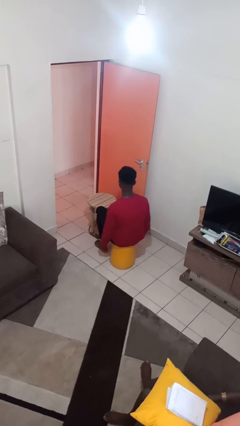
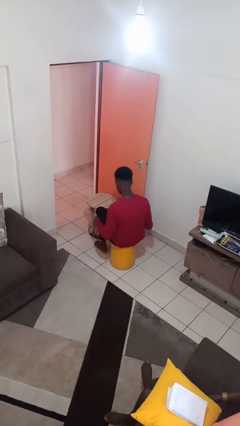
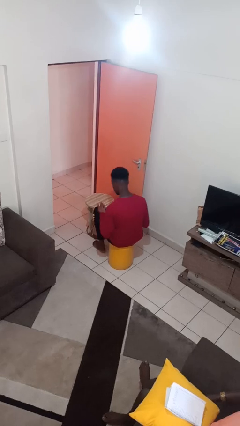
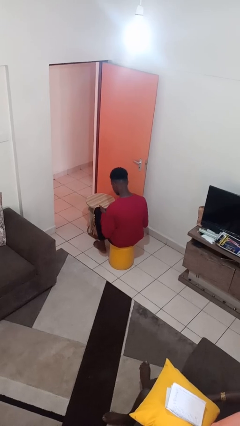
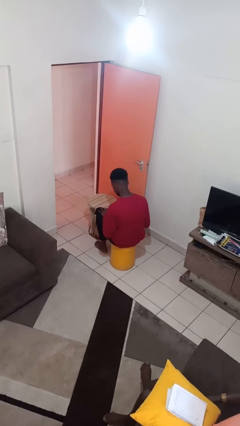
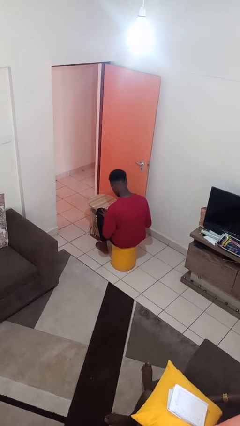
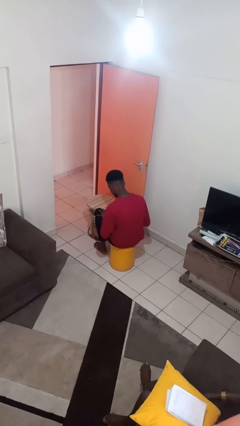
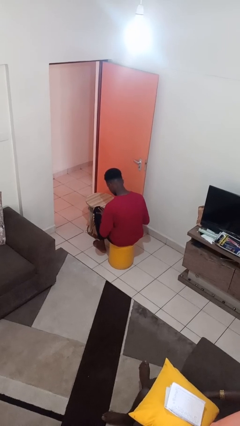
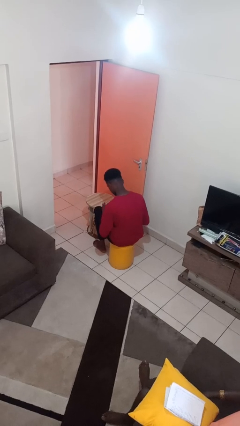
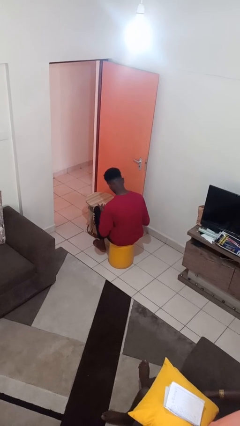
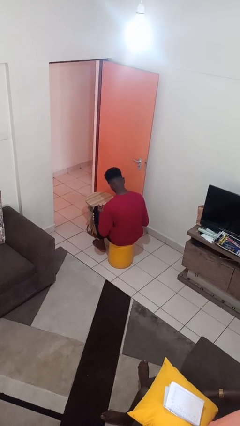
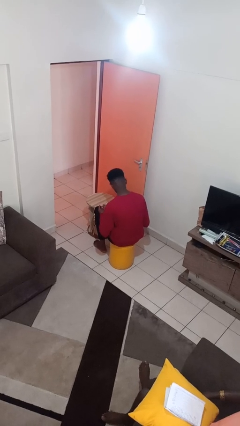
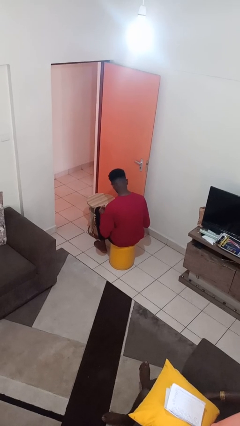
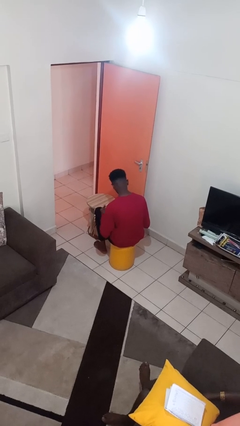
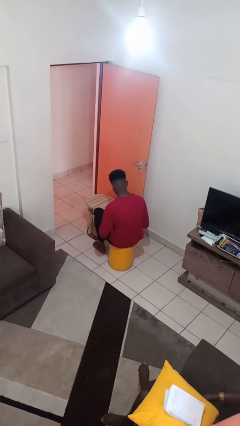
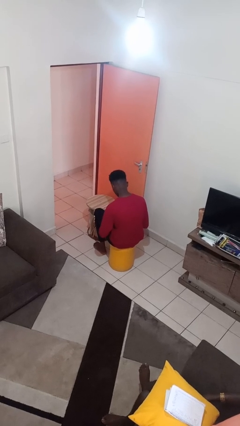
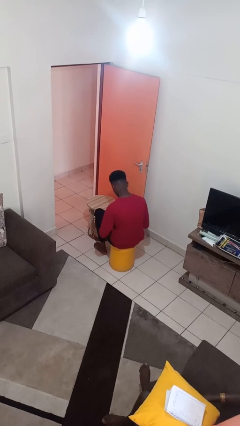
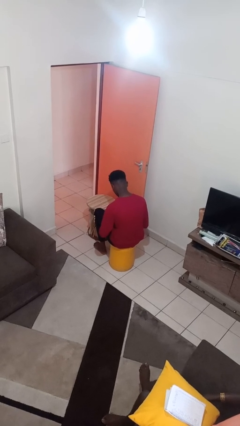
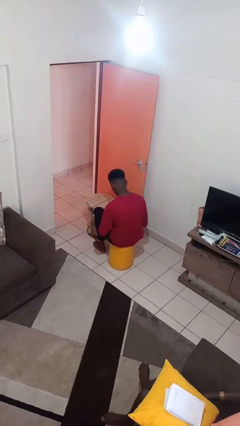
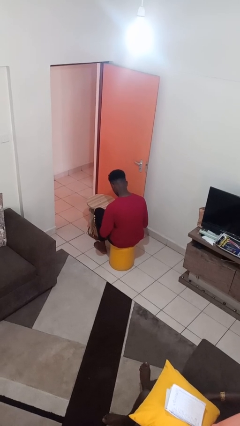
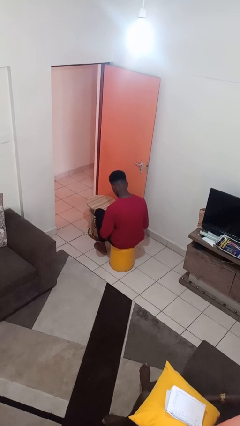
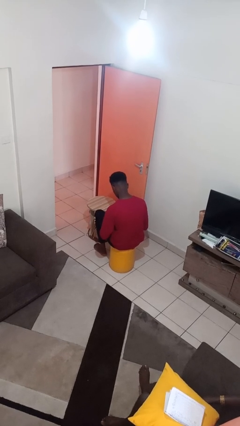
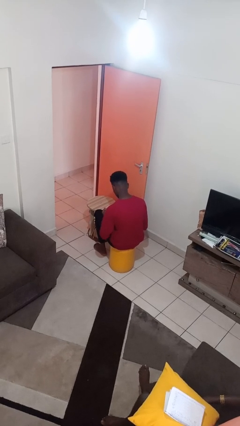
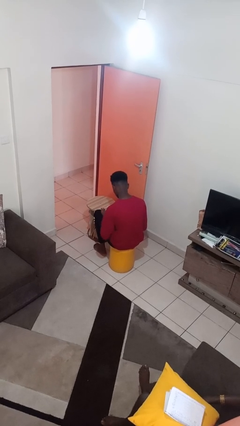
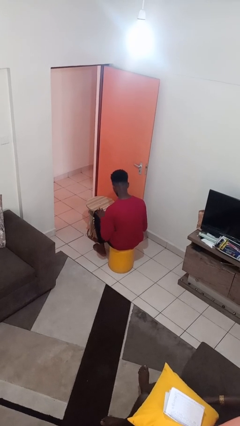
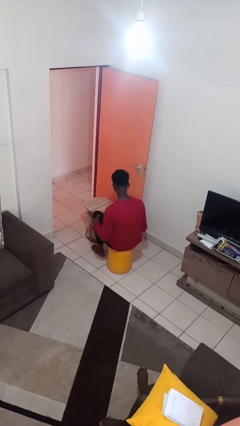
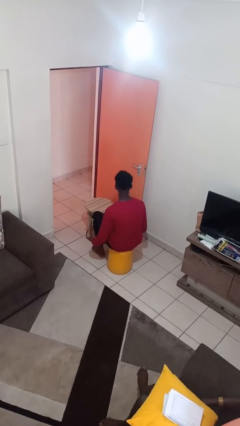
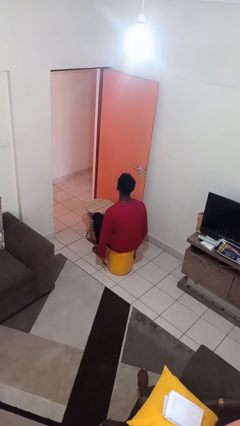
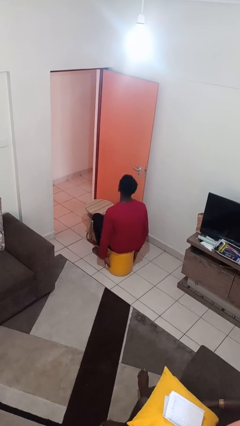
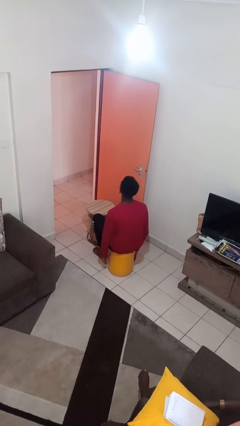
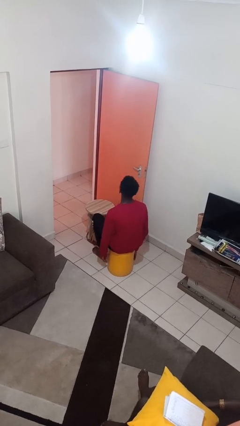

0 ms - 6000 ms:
person looks at hands in lap

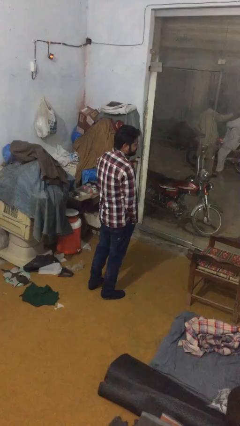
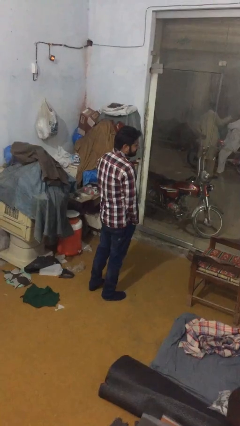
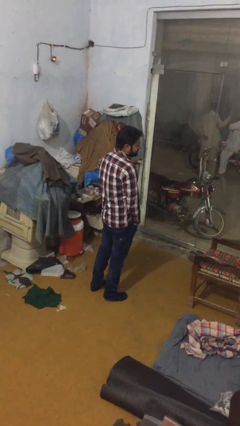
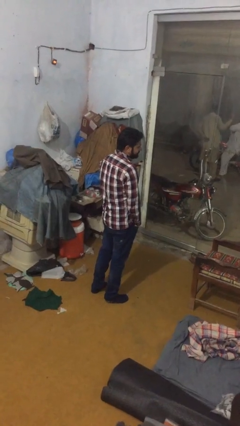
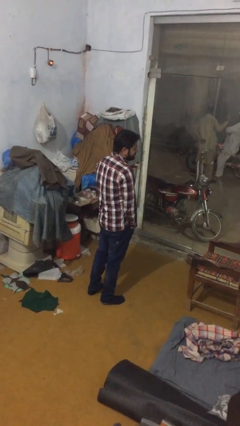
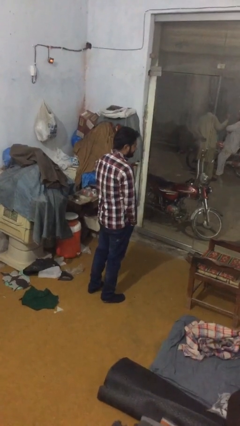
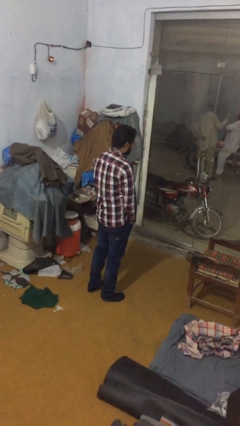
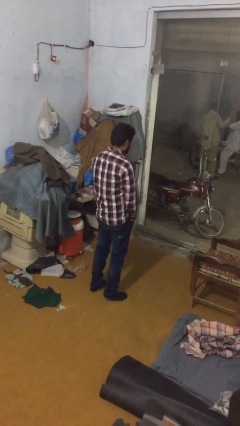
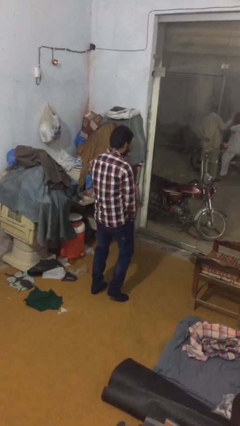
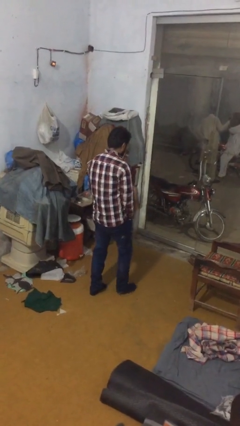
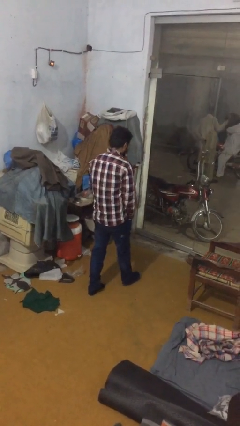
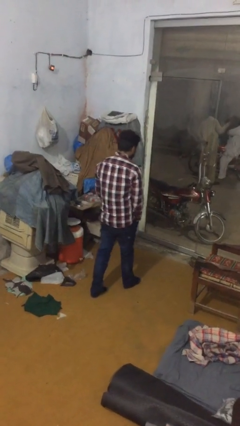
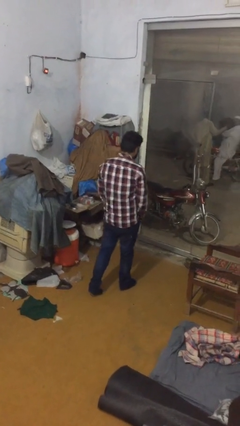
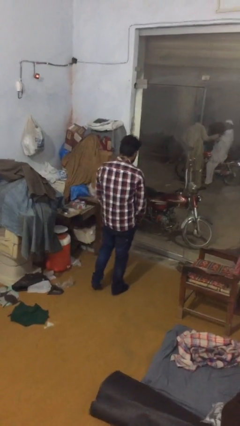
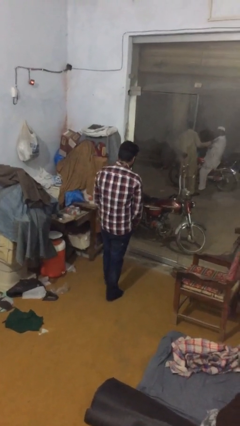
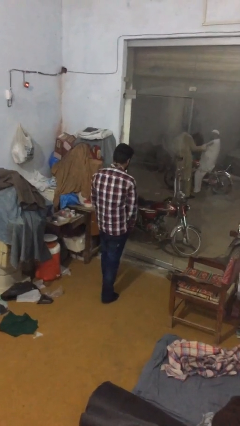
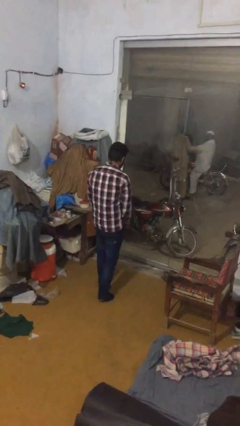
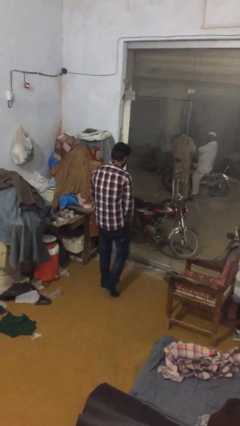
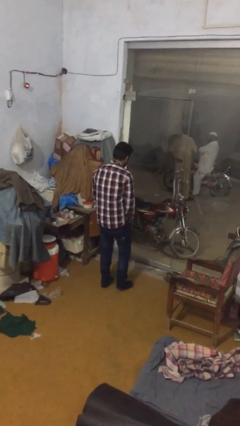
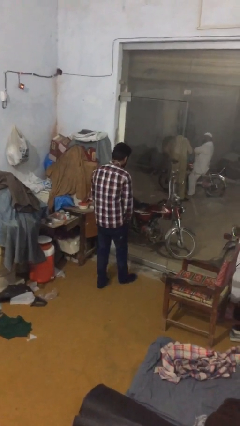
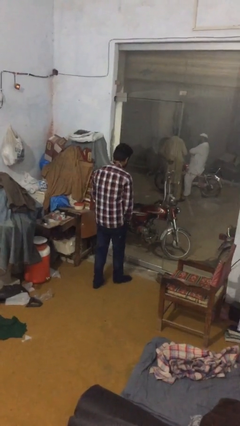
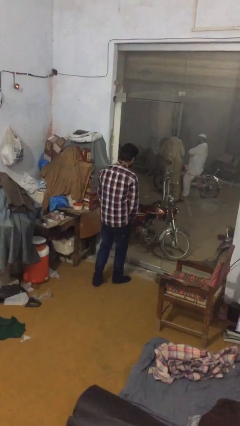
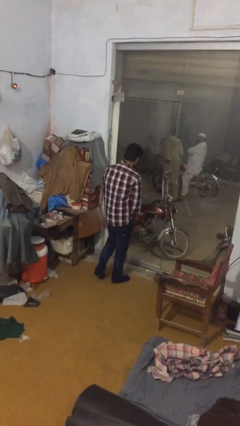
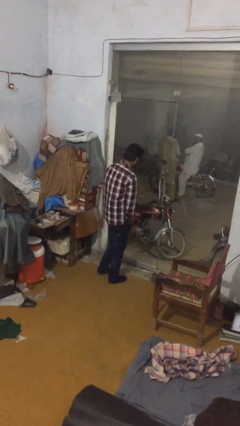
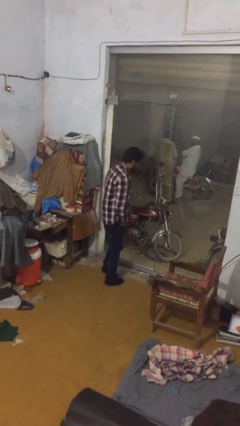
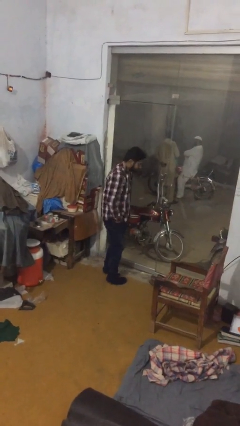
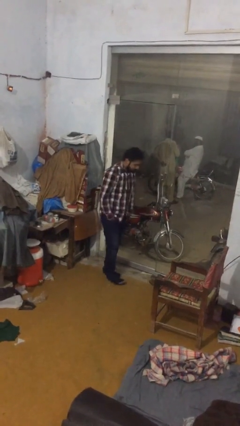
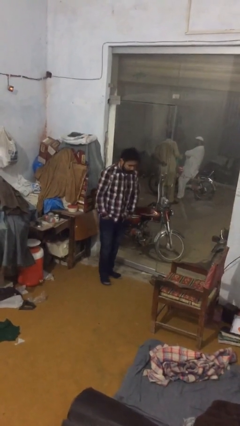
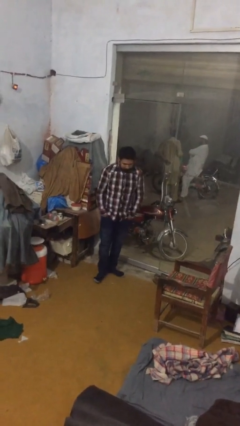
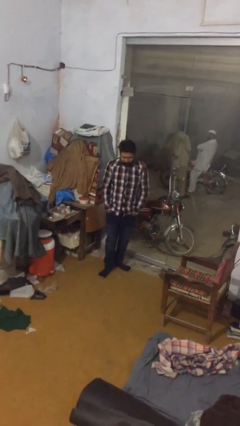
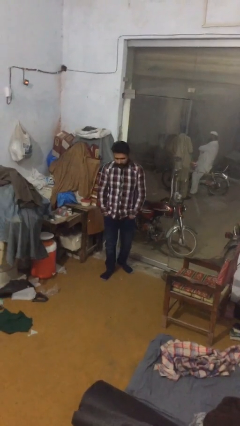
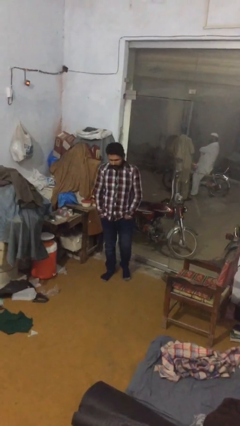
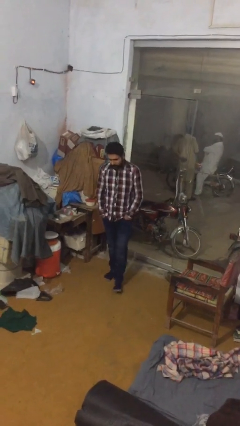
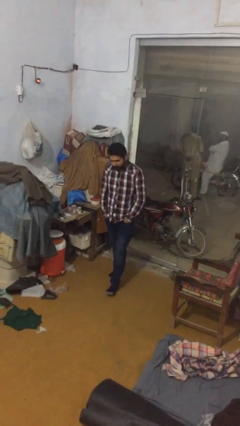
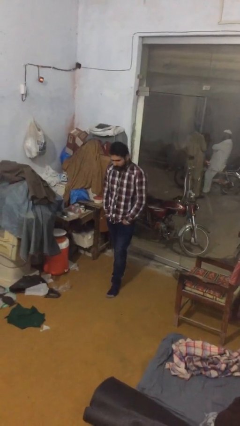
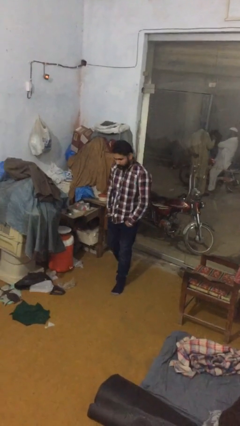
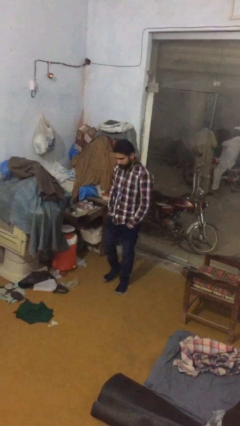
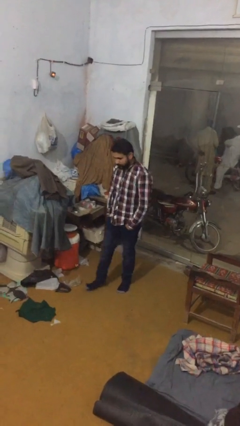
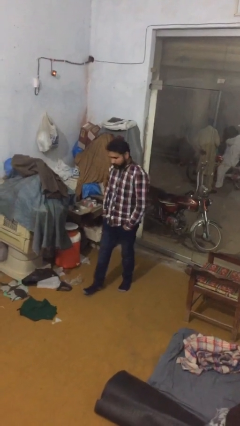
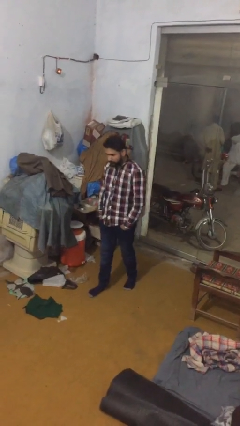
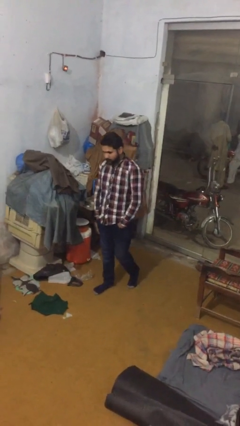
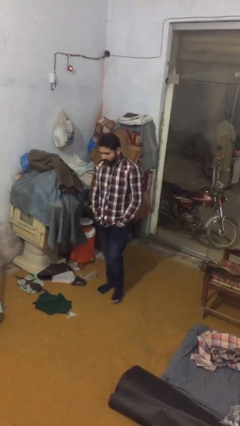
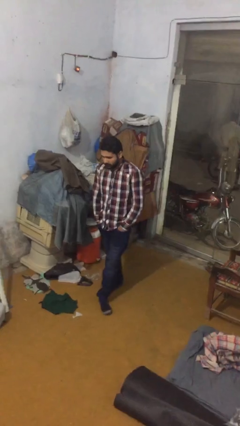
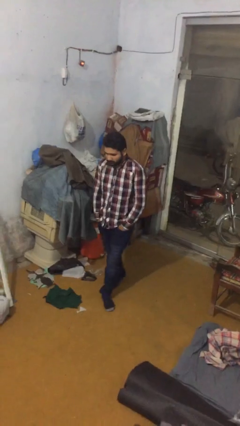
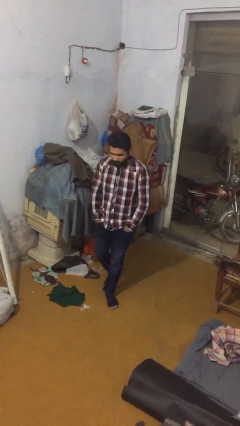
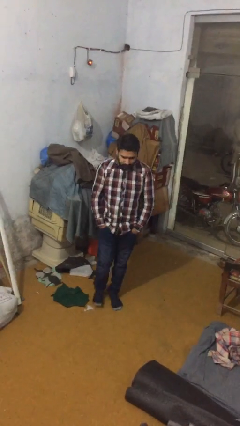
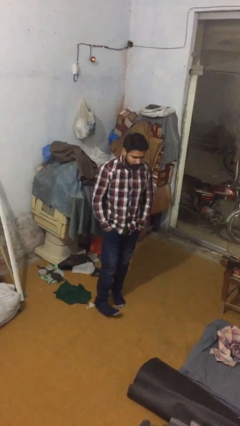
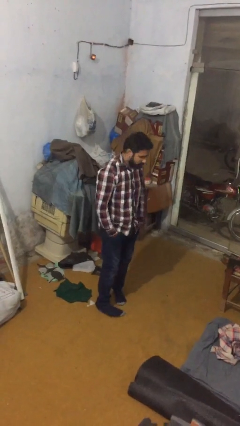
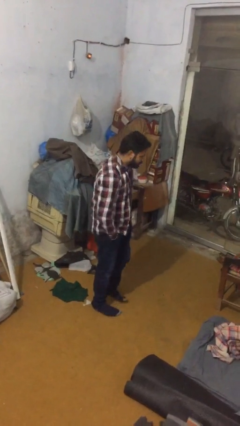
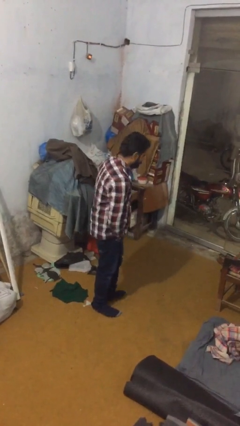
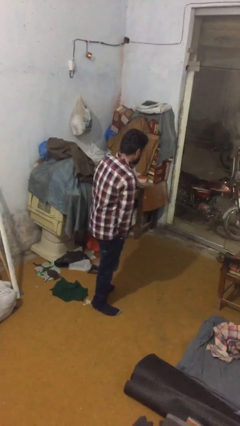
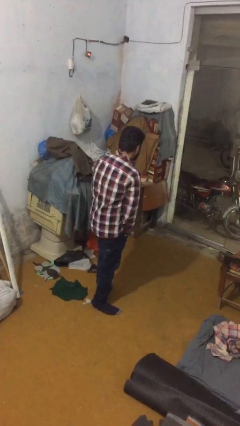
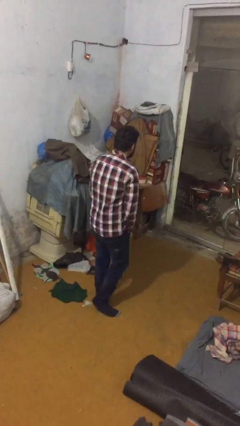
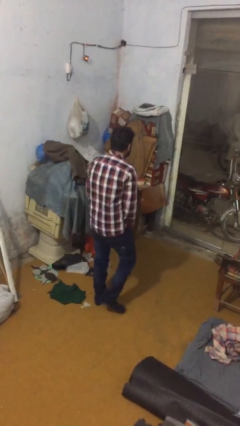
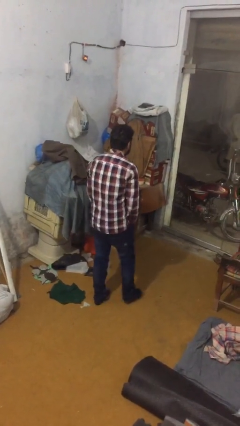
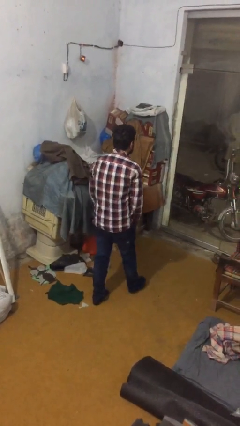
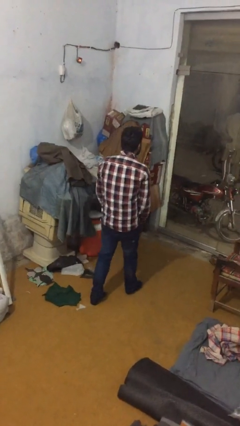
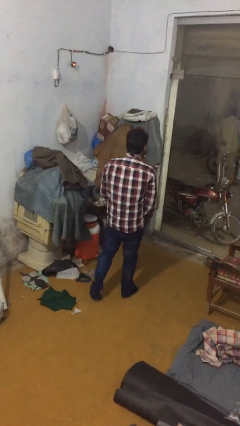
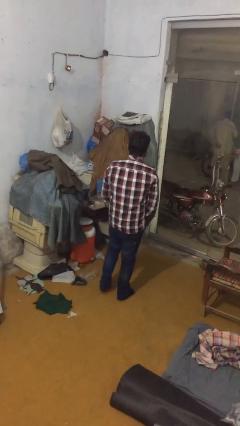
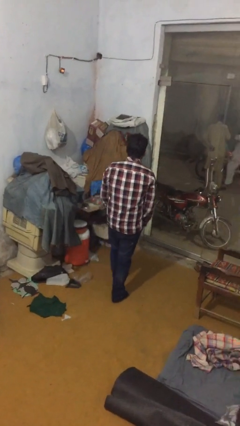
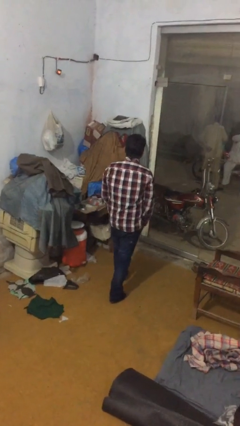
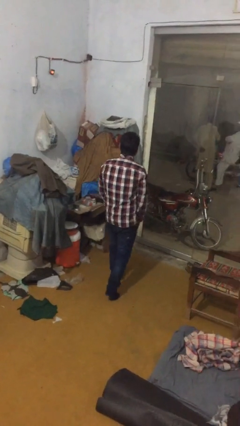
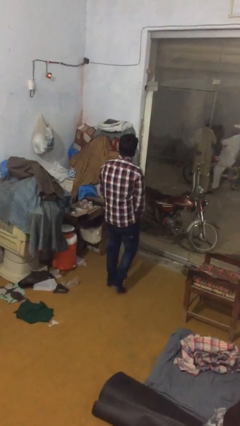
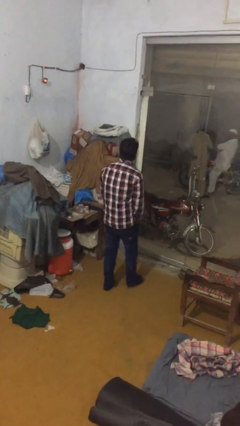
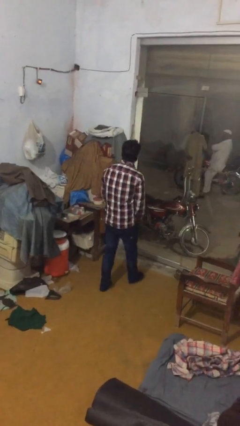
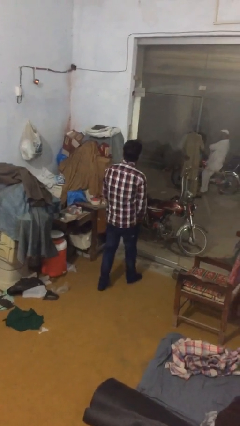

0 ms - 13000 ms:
person walks
